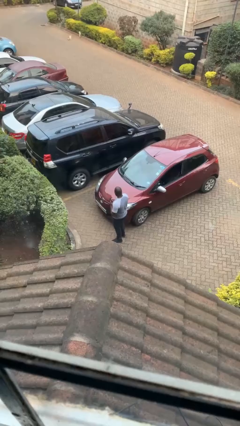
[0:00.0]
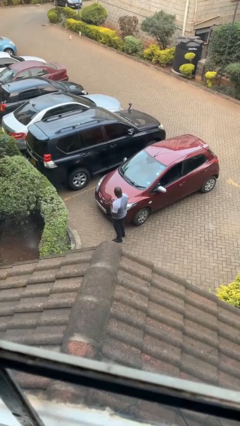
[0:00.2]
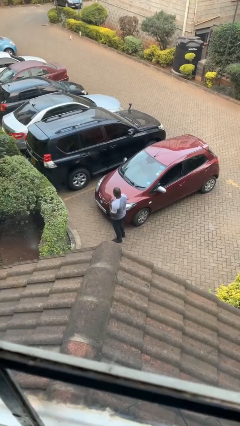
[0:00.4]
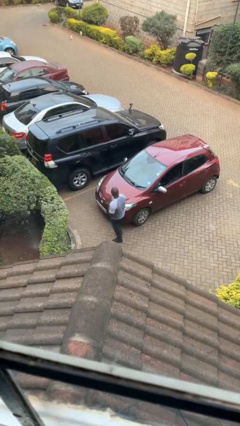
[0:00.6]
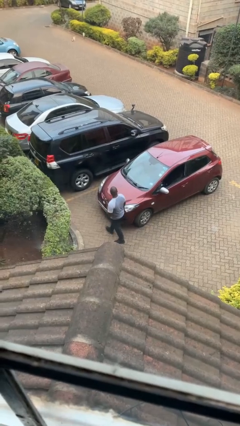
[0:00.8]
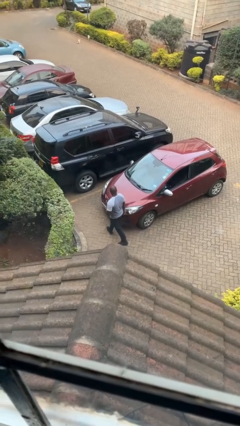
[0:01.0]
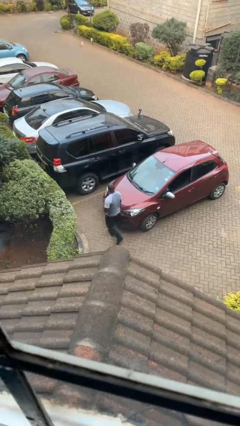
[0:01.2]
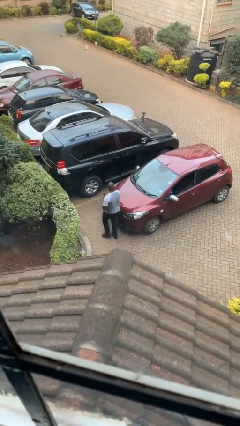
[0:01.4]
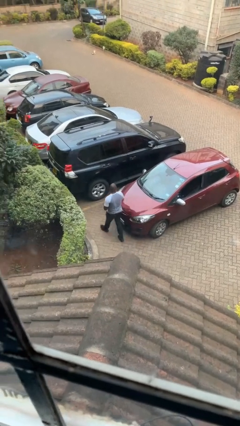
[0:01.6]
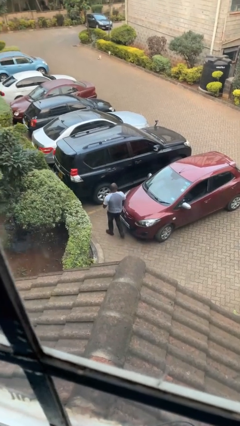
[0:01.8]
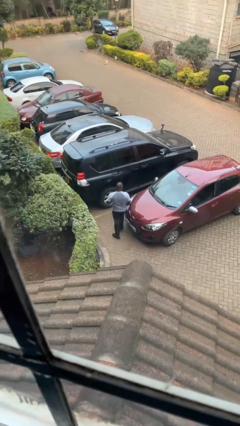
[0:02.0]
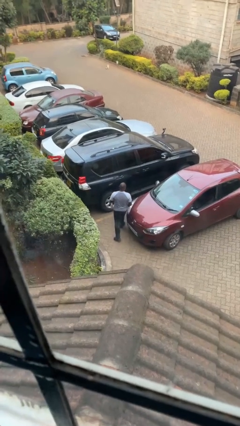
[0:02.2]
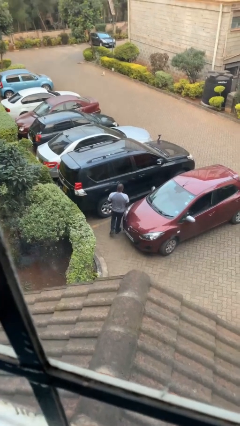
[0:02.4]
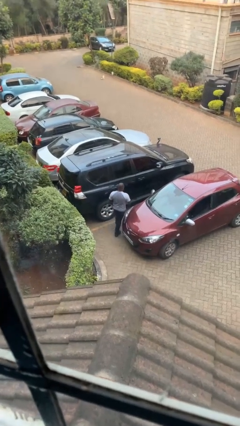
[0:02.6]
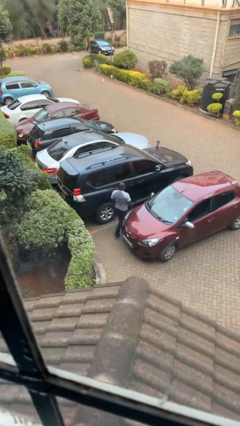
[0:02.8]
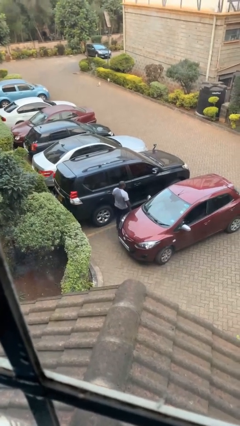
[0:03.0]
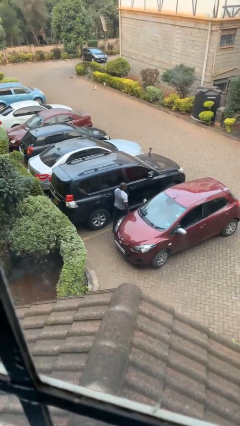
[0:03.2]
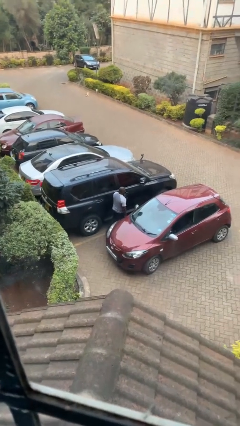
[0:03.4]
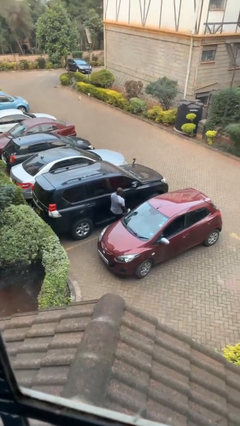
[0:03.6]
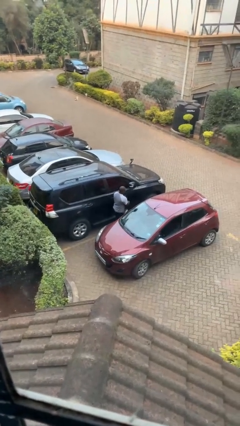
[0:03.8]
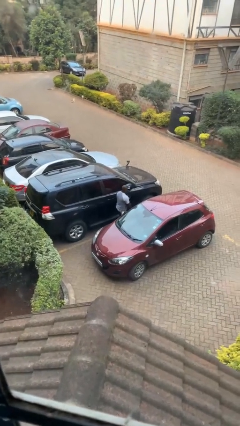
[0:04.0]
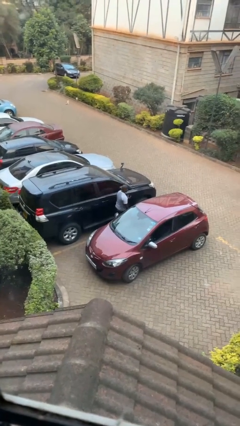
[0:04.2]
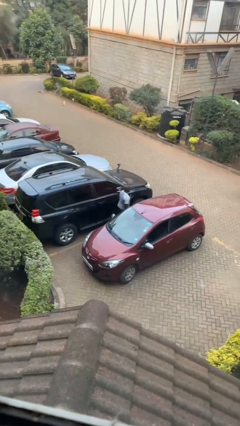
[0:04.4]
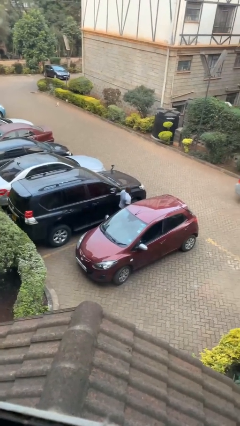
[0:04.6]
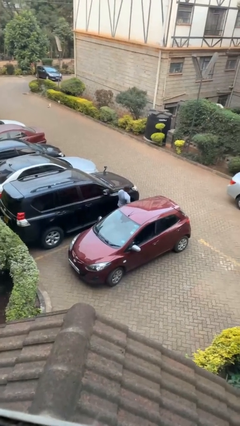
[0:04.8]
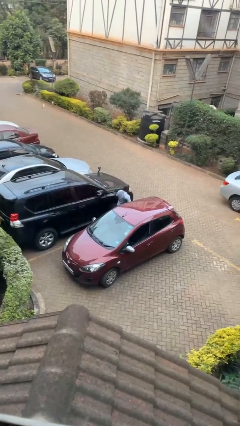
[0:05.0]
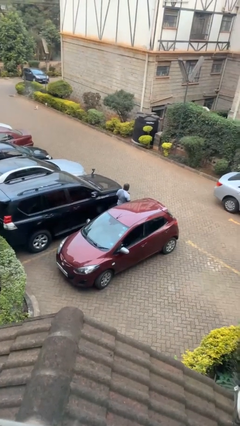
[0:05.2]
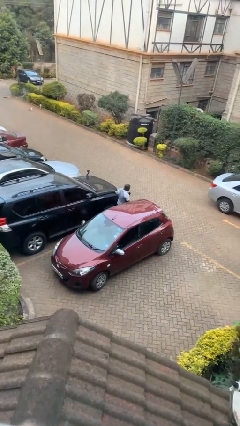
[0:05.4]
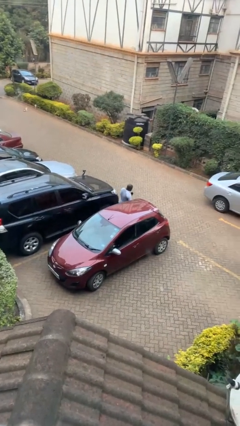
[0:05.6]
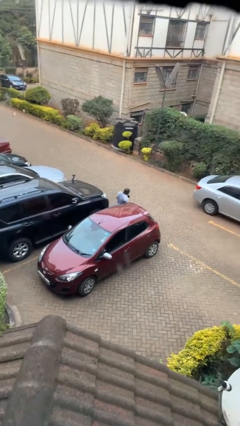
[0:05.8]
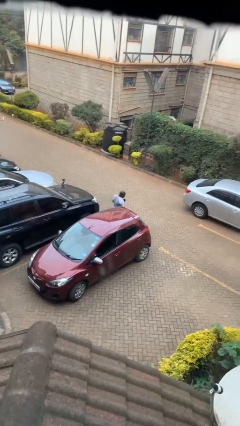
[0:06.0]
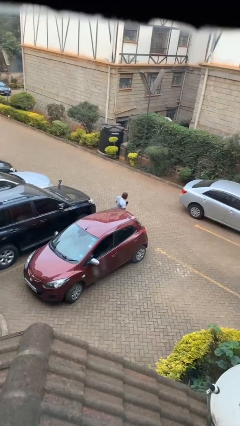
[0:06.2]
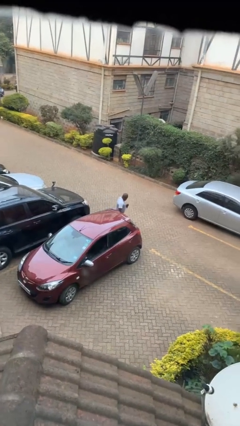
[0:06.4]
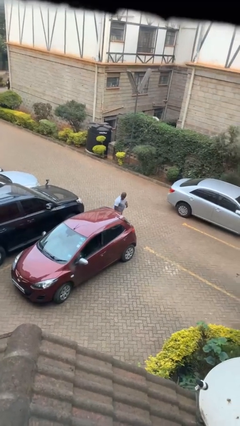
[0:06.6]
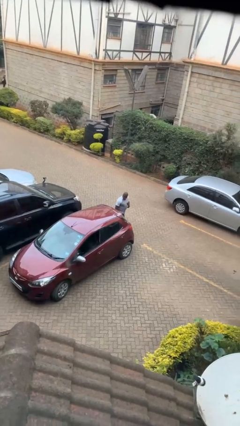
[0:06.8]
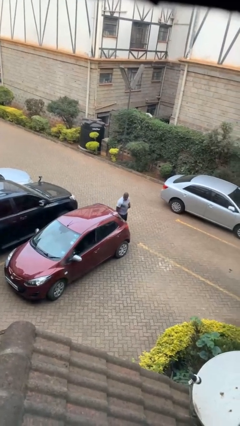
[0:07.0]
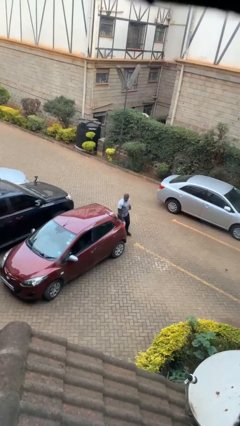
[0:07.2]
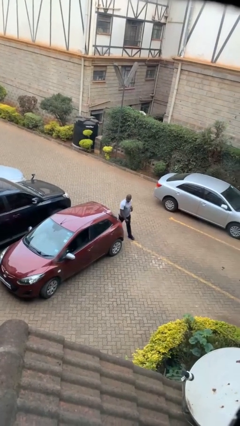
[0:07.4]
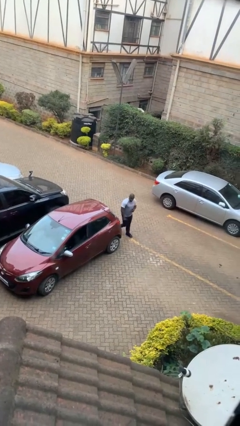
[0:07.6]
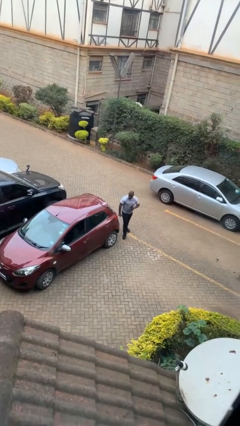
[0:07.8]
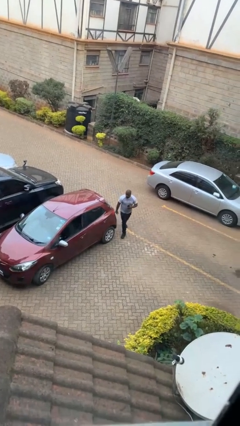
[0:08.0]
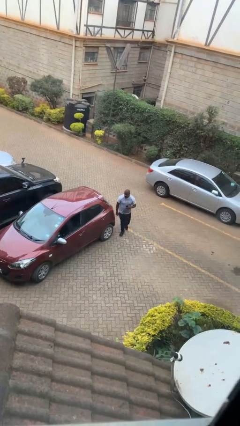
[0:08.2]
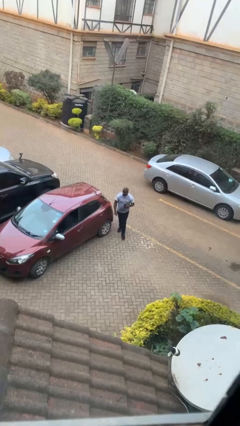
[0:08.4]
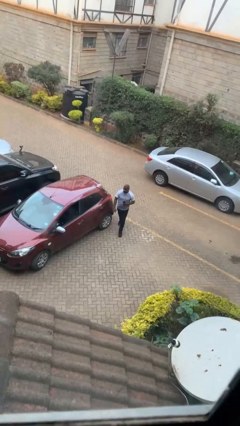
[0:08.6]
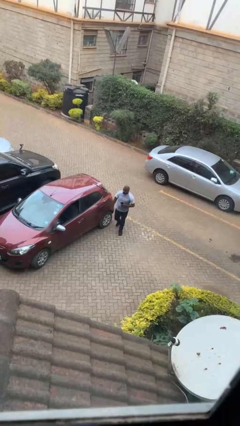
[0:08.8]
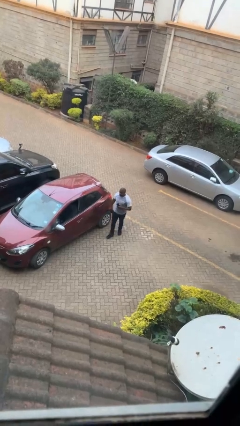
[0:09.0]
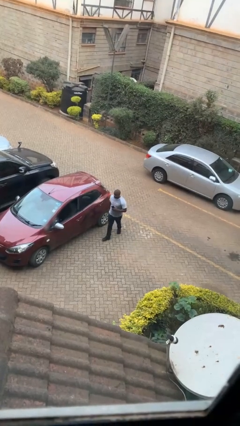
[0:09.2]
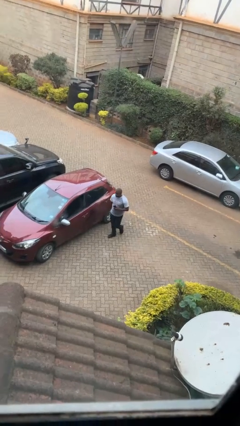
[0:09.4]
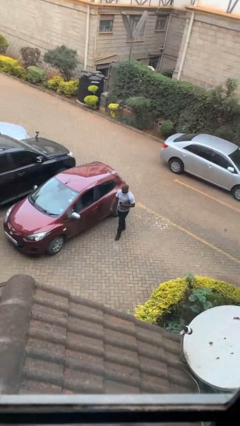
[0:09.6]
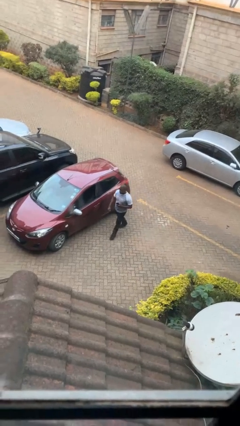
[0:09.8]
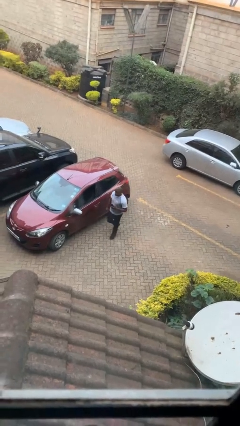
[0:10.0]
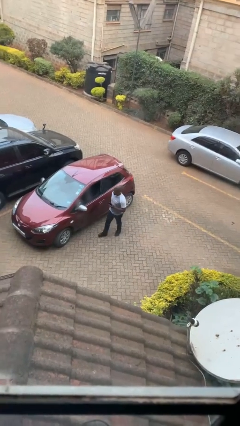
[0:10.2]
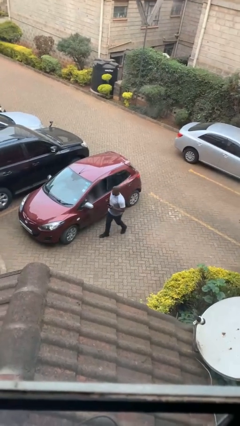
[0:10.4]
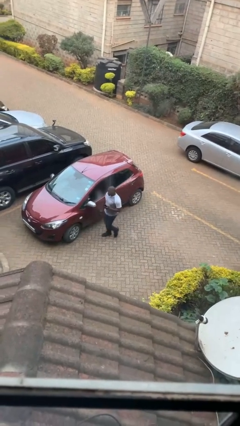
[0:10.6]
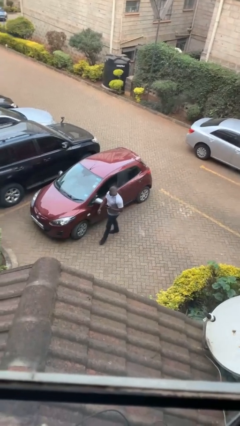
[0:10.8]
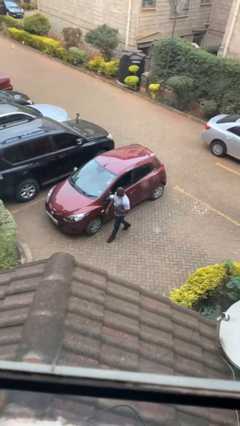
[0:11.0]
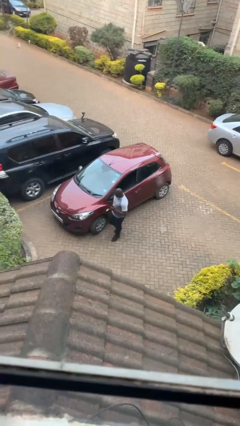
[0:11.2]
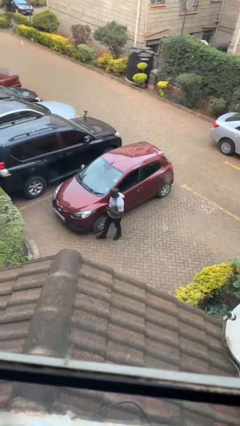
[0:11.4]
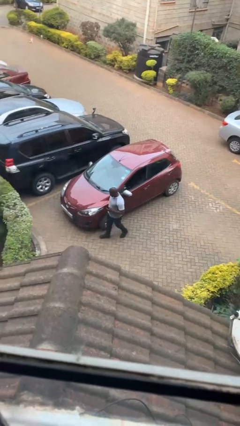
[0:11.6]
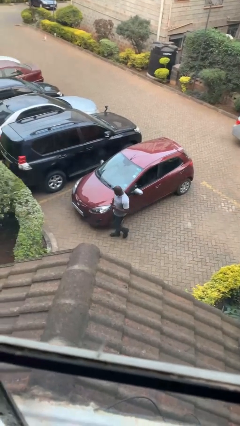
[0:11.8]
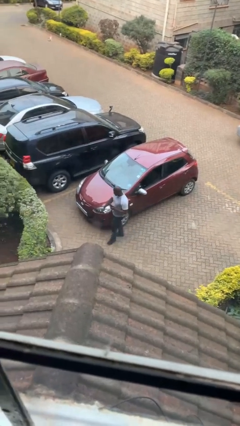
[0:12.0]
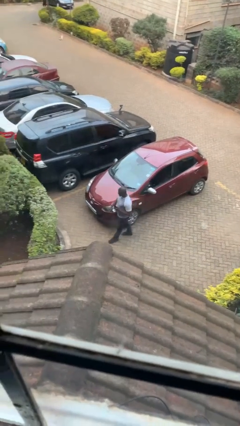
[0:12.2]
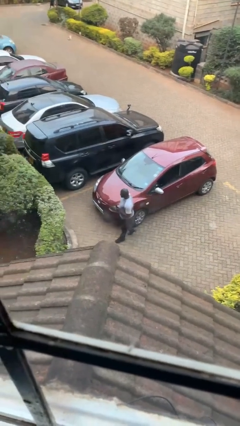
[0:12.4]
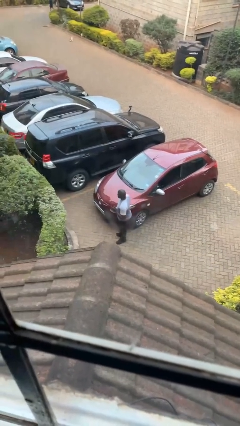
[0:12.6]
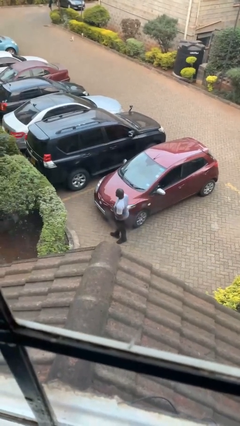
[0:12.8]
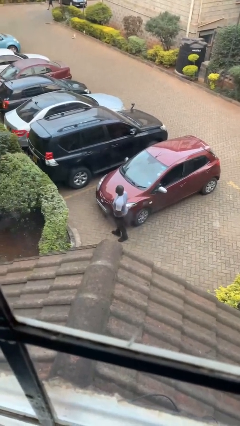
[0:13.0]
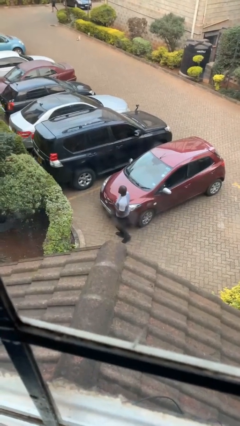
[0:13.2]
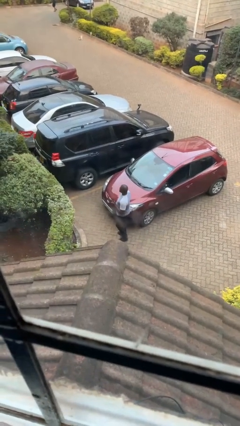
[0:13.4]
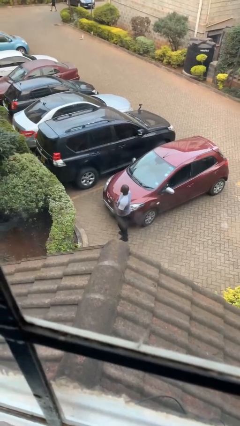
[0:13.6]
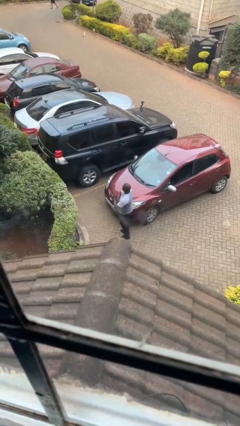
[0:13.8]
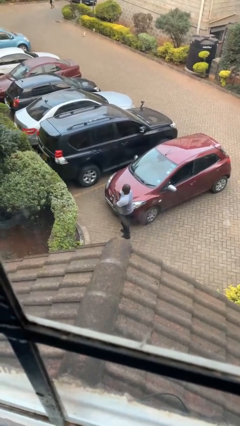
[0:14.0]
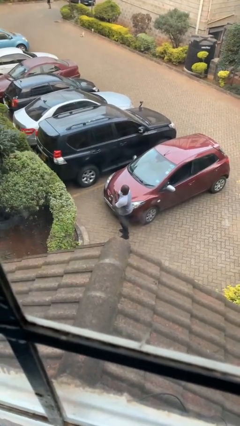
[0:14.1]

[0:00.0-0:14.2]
person walks around car

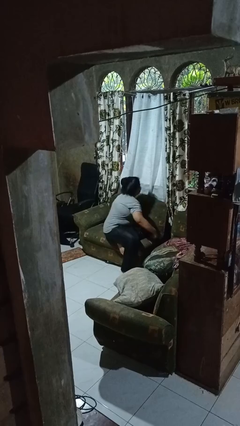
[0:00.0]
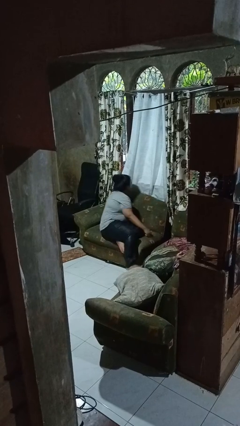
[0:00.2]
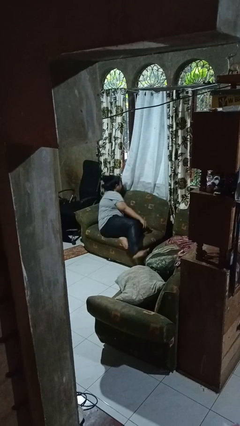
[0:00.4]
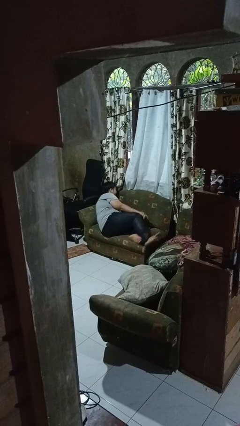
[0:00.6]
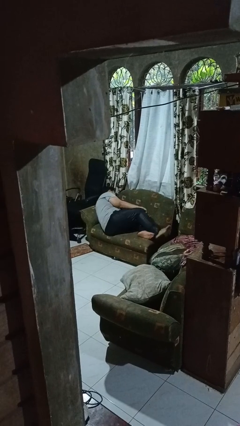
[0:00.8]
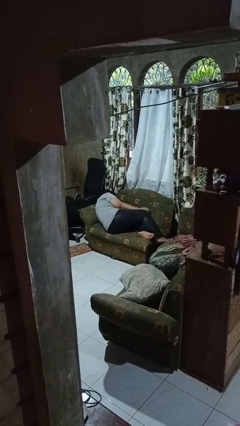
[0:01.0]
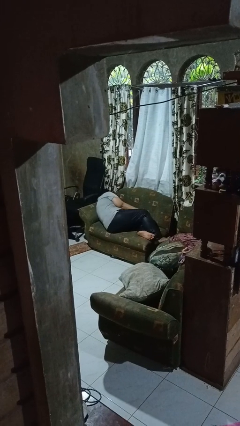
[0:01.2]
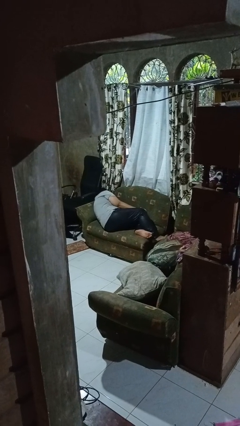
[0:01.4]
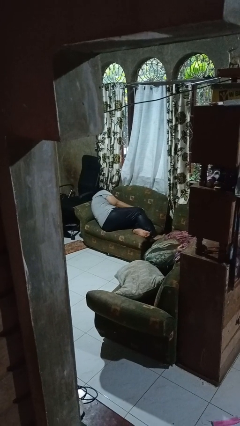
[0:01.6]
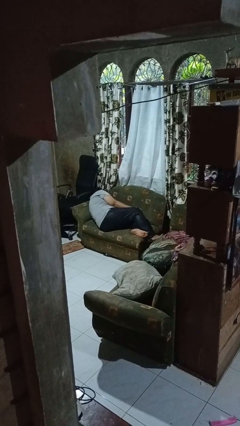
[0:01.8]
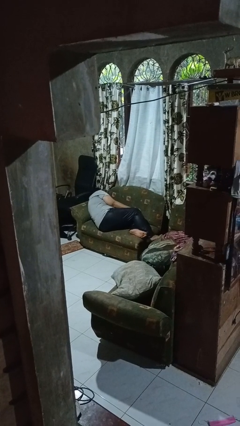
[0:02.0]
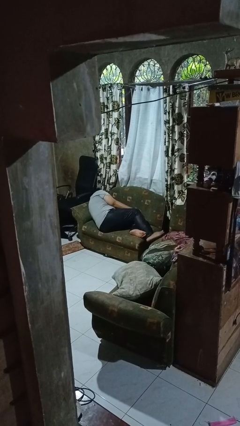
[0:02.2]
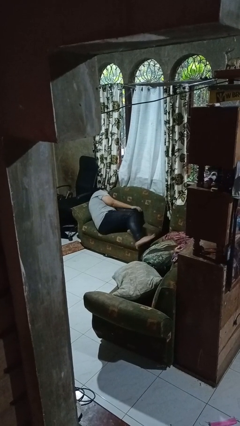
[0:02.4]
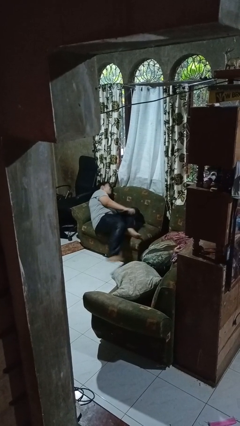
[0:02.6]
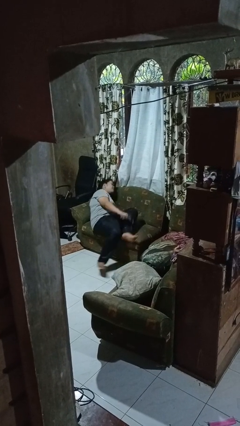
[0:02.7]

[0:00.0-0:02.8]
person lies down on couch

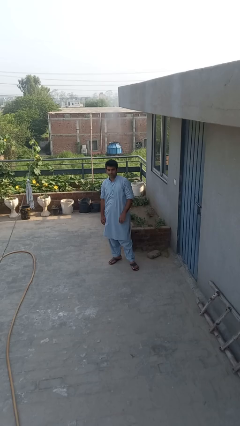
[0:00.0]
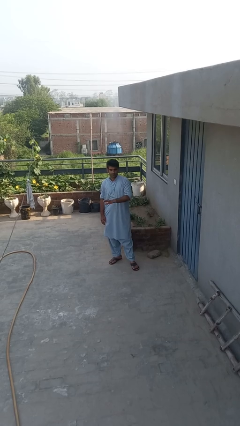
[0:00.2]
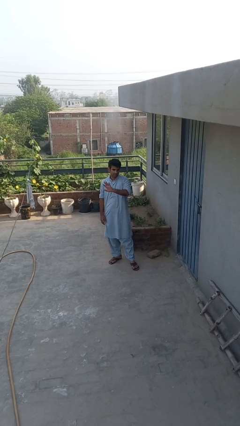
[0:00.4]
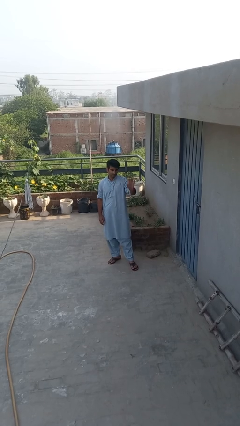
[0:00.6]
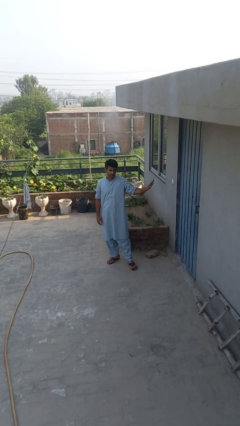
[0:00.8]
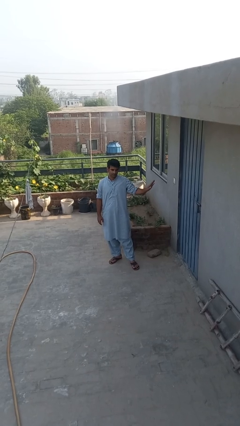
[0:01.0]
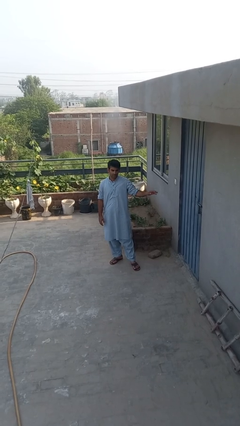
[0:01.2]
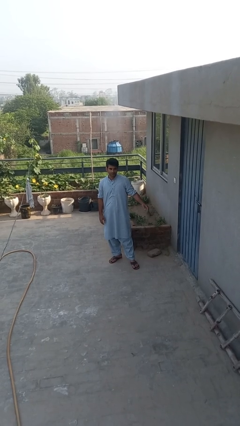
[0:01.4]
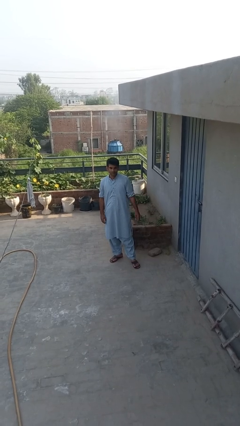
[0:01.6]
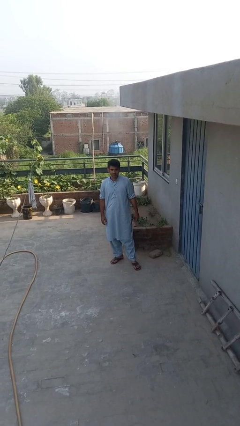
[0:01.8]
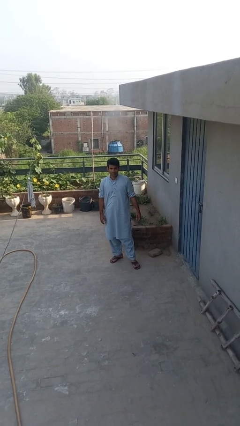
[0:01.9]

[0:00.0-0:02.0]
person gestures swipe left
